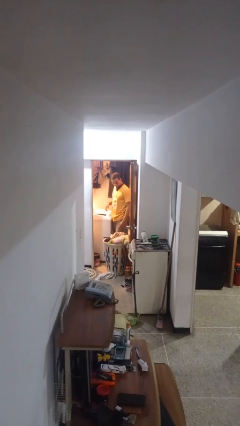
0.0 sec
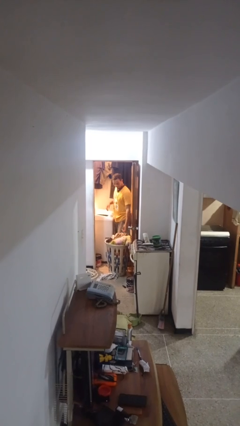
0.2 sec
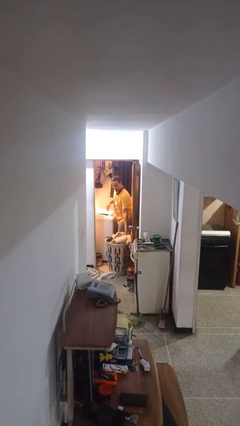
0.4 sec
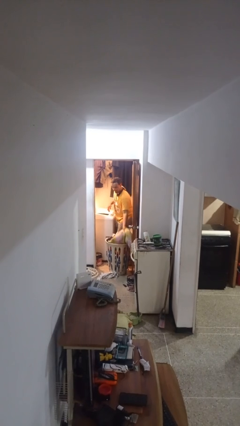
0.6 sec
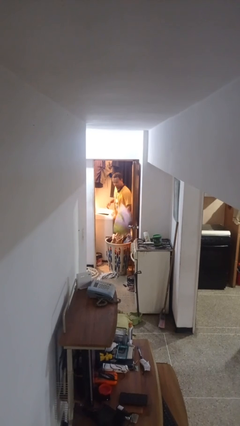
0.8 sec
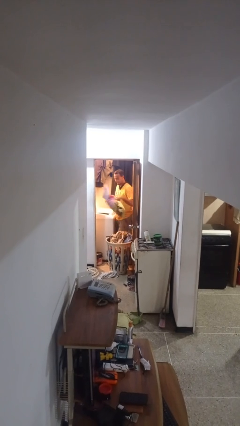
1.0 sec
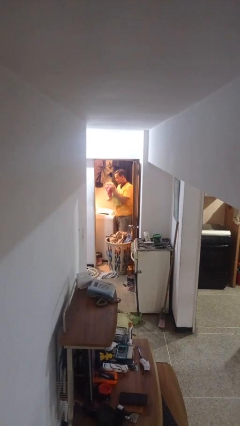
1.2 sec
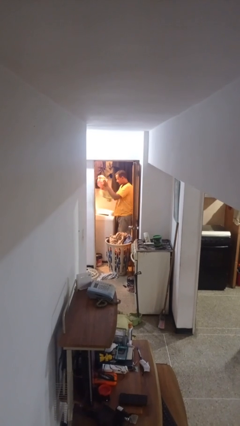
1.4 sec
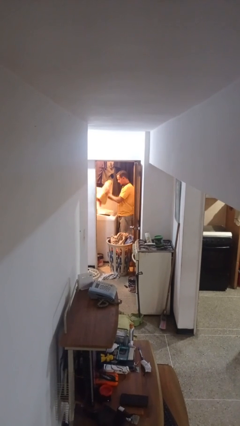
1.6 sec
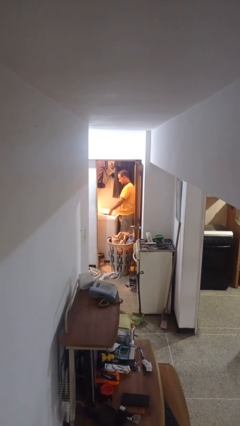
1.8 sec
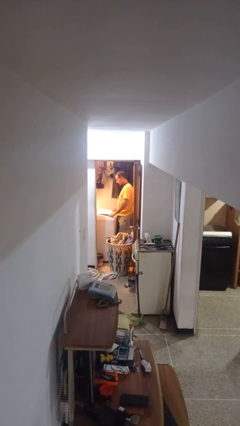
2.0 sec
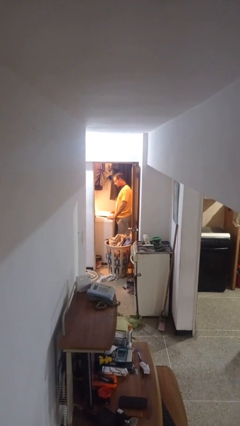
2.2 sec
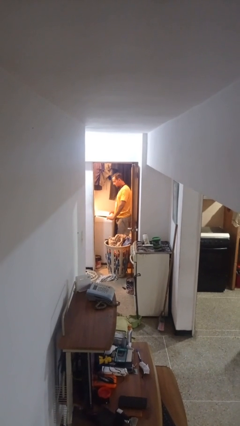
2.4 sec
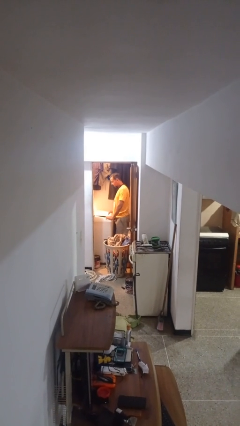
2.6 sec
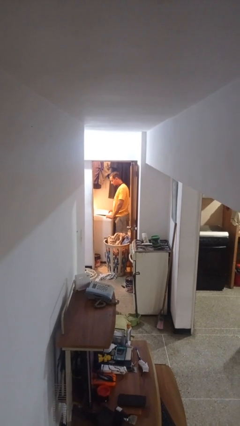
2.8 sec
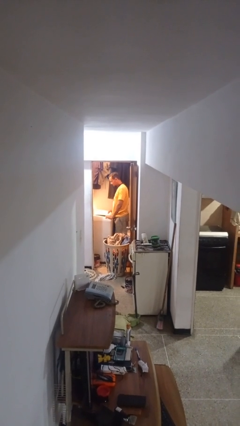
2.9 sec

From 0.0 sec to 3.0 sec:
person loads clotheswasher

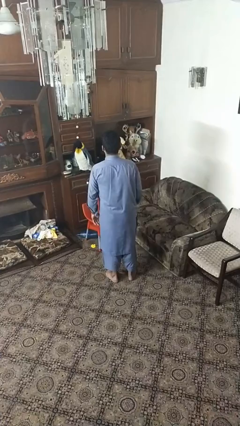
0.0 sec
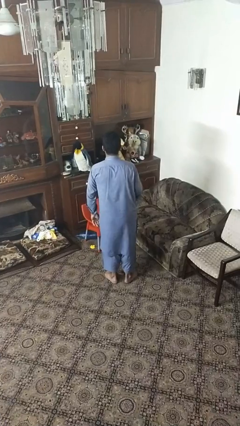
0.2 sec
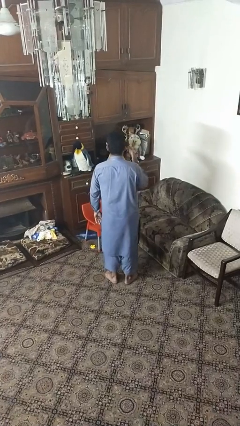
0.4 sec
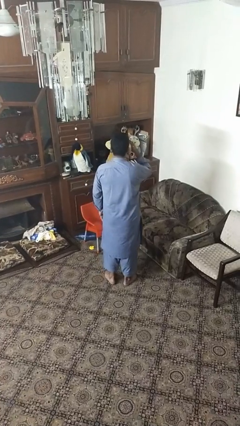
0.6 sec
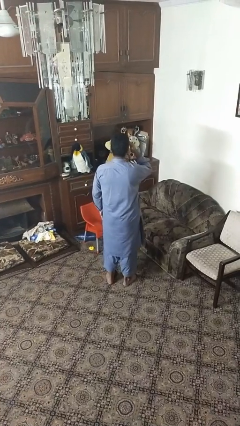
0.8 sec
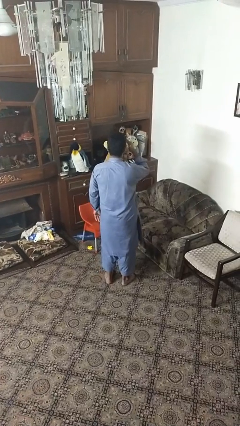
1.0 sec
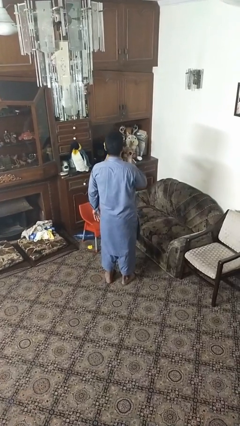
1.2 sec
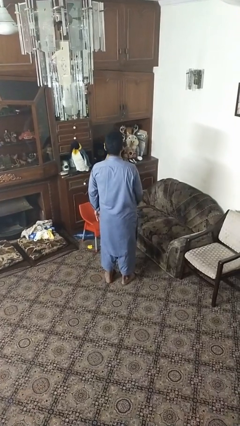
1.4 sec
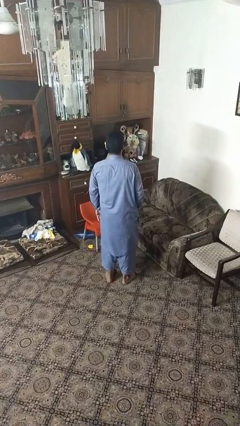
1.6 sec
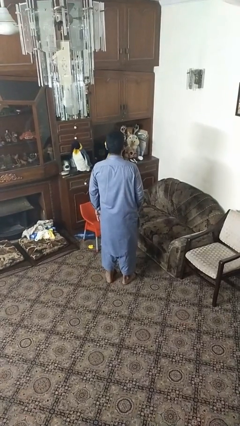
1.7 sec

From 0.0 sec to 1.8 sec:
person salutes

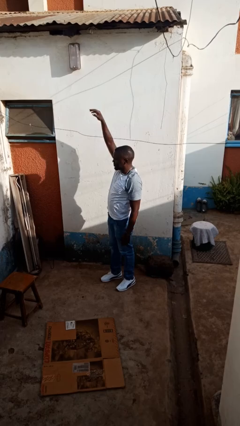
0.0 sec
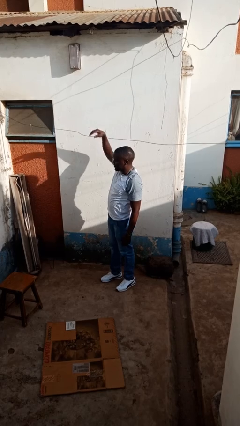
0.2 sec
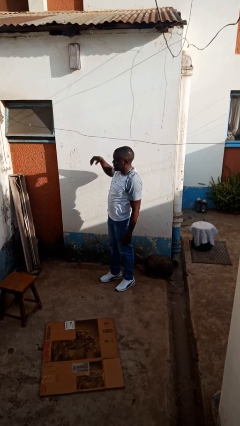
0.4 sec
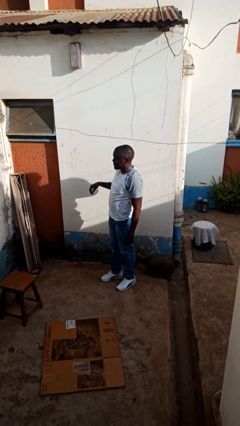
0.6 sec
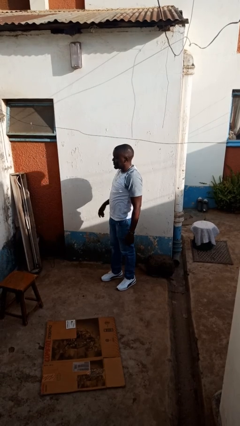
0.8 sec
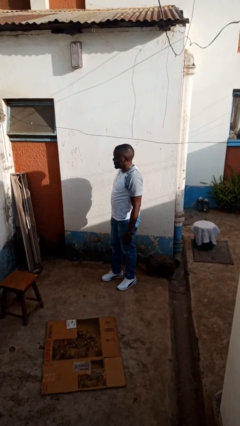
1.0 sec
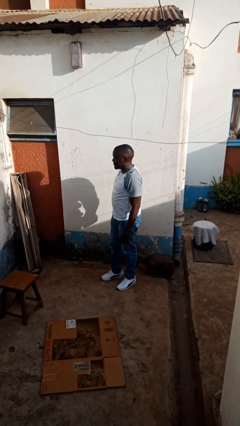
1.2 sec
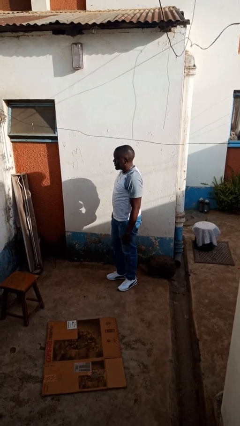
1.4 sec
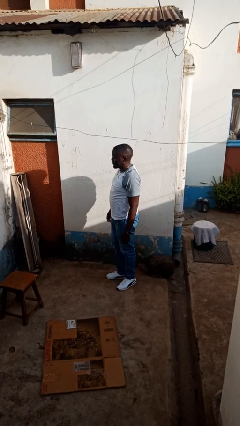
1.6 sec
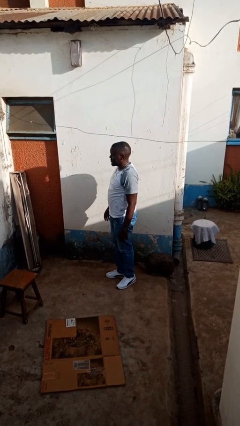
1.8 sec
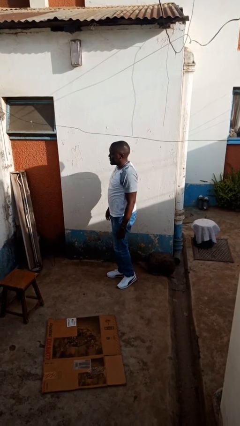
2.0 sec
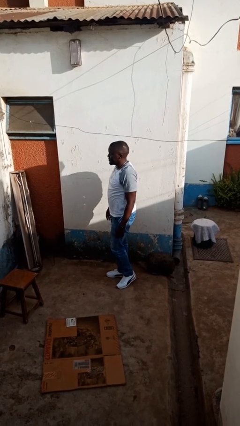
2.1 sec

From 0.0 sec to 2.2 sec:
person gestures lower hand

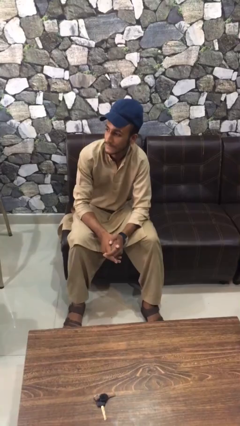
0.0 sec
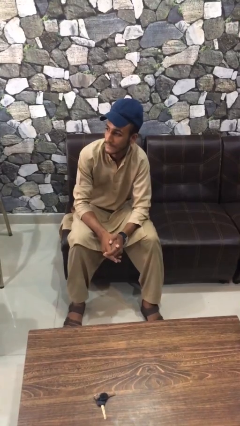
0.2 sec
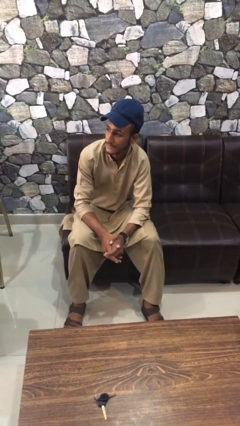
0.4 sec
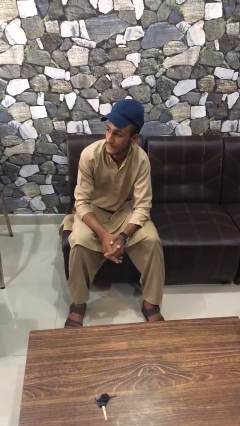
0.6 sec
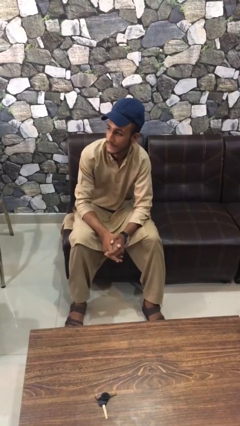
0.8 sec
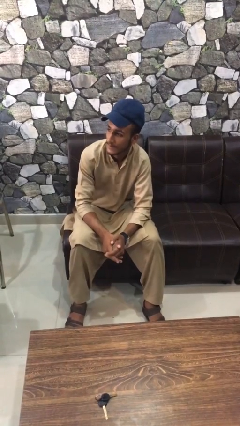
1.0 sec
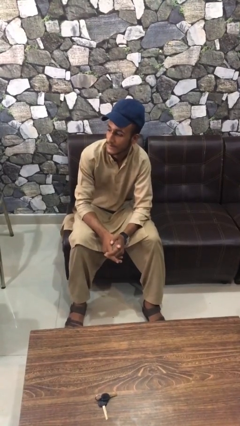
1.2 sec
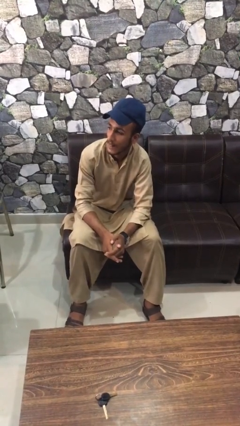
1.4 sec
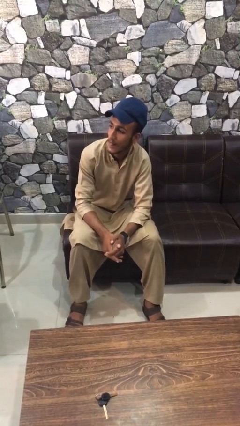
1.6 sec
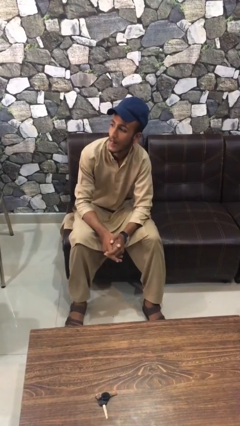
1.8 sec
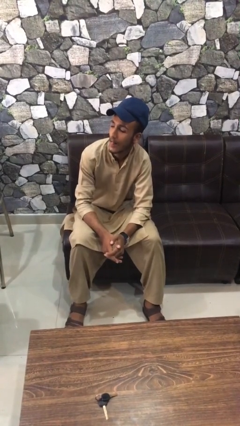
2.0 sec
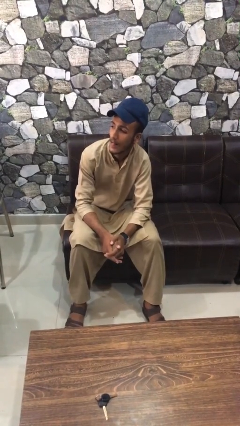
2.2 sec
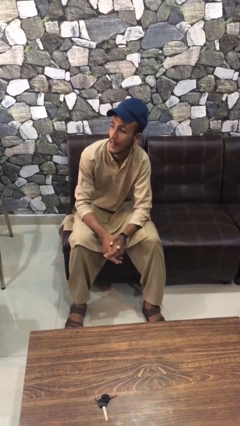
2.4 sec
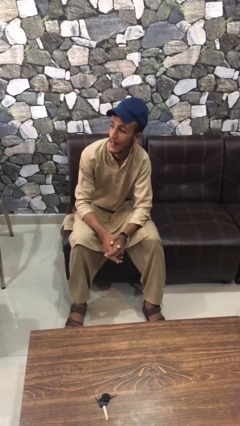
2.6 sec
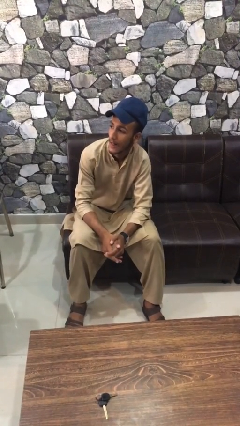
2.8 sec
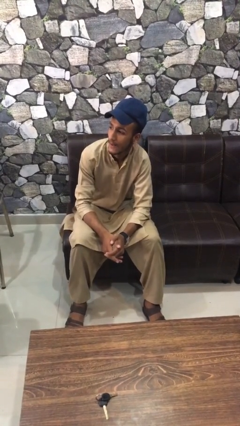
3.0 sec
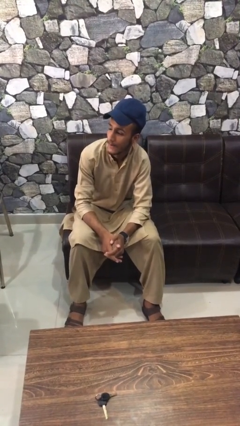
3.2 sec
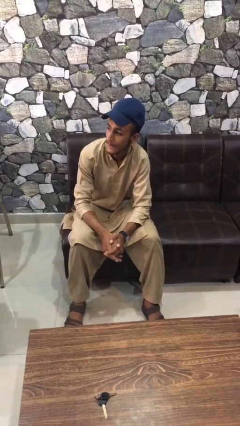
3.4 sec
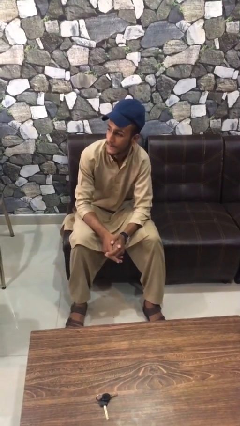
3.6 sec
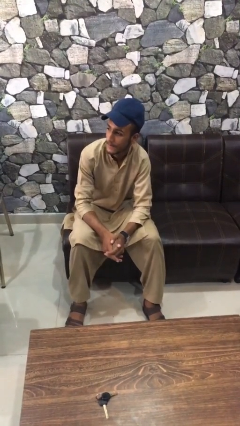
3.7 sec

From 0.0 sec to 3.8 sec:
person sticks out tongue

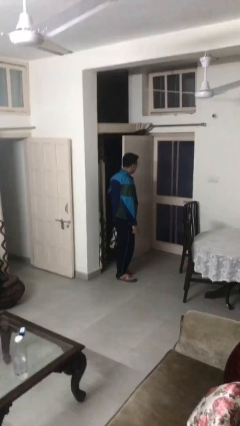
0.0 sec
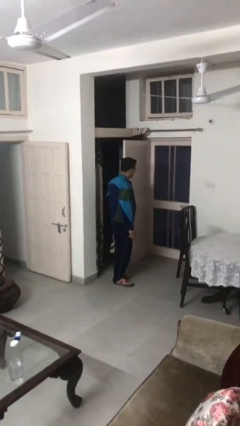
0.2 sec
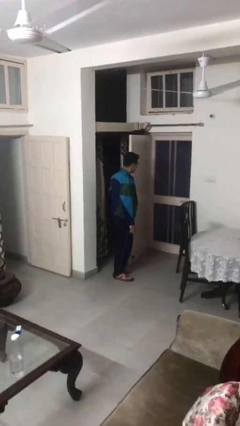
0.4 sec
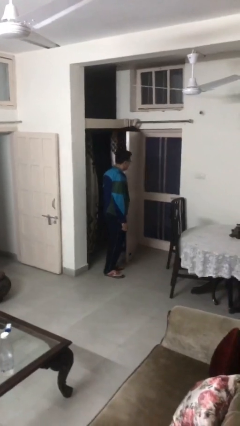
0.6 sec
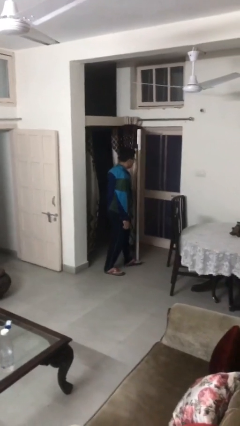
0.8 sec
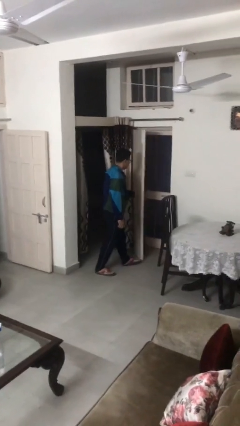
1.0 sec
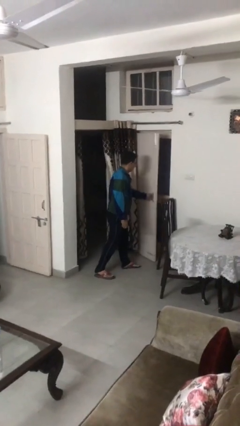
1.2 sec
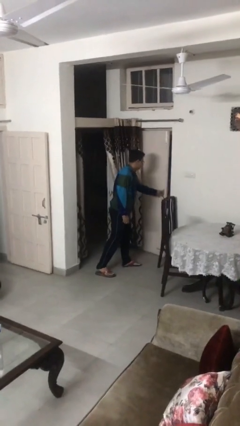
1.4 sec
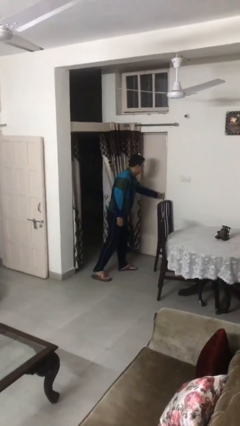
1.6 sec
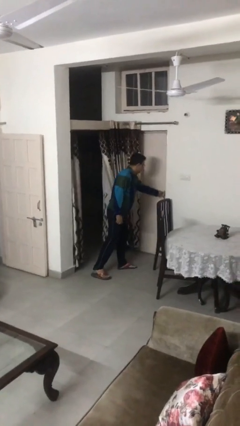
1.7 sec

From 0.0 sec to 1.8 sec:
person closes facility door

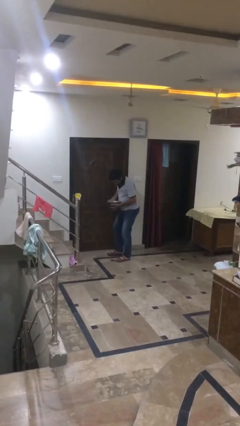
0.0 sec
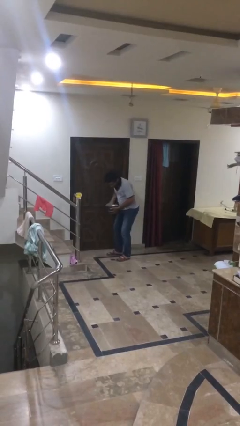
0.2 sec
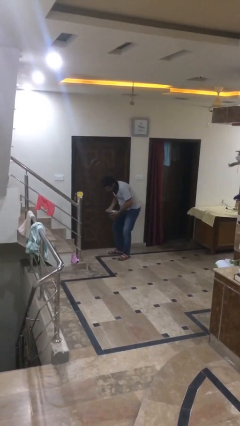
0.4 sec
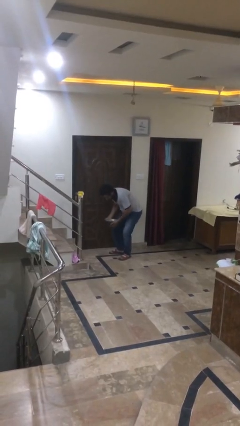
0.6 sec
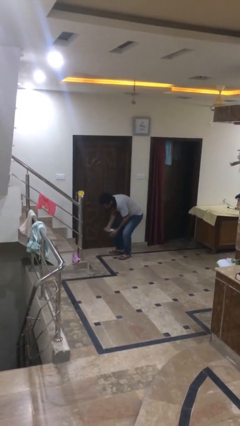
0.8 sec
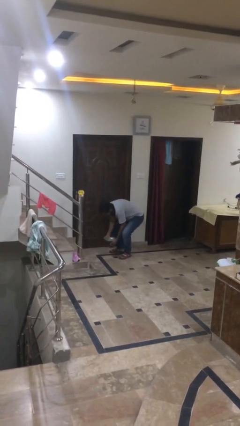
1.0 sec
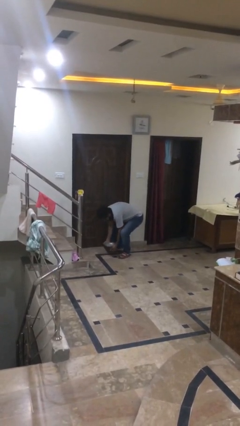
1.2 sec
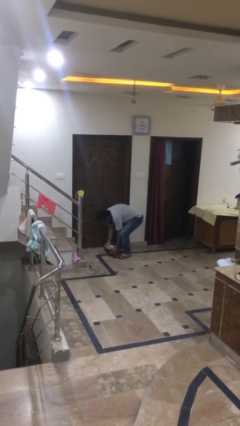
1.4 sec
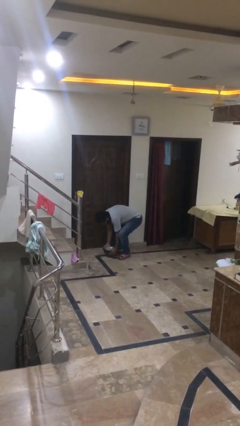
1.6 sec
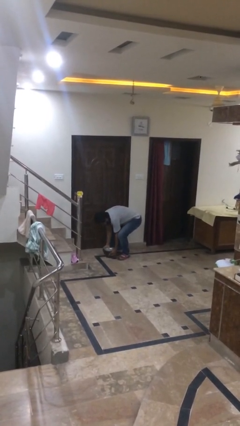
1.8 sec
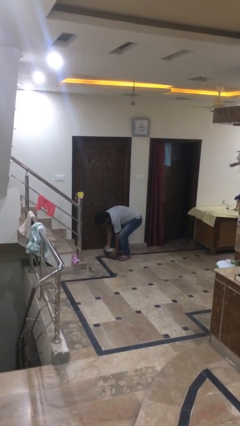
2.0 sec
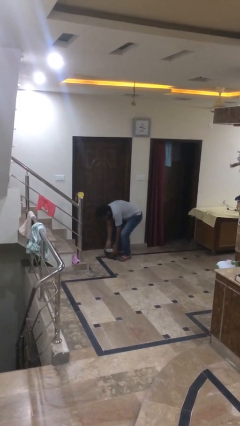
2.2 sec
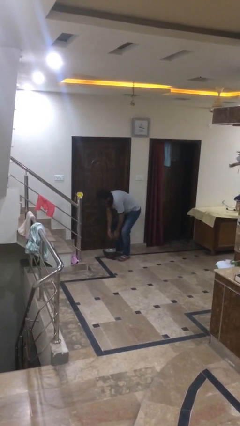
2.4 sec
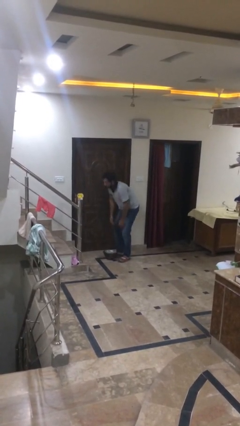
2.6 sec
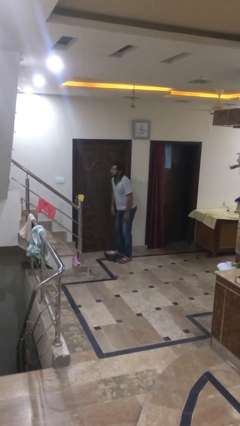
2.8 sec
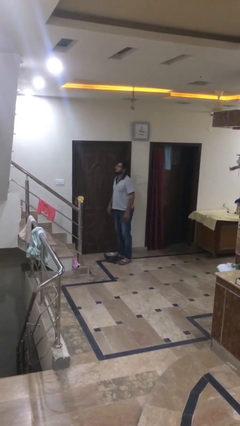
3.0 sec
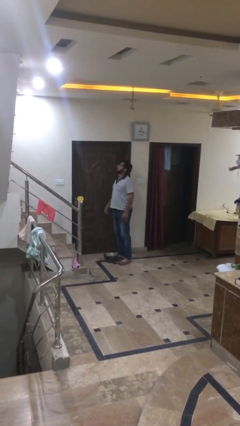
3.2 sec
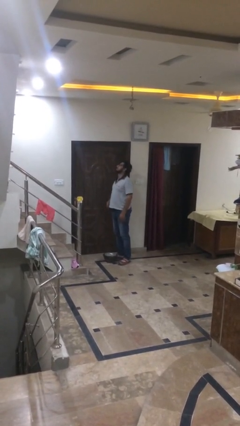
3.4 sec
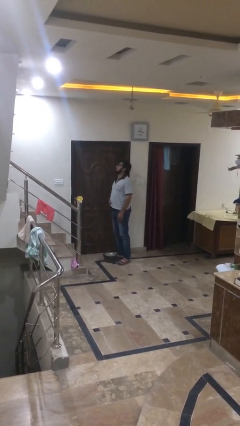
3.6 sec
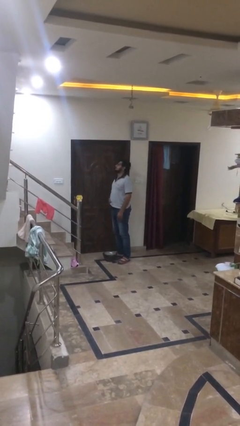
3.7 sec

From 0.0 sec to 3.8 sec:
person puts down object on floor

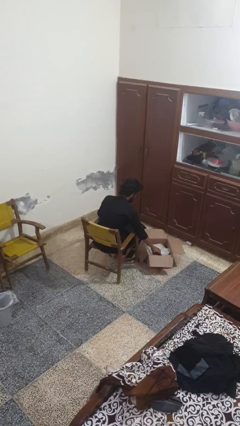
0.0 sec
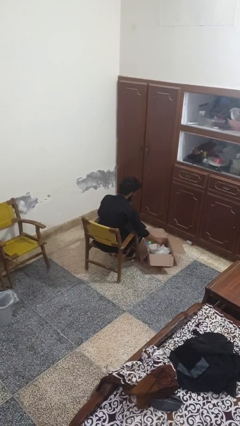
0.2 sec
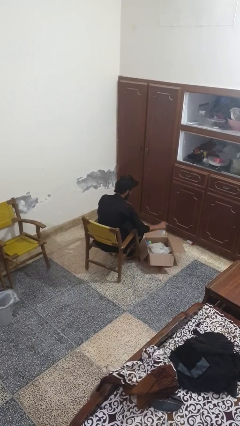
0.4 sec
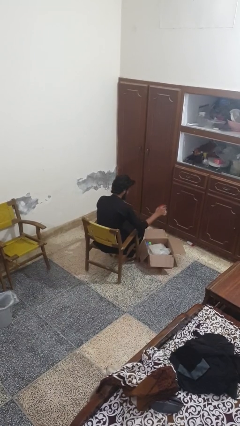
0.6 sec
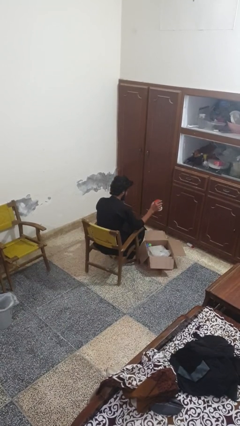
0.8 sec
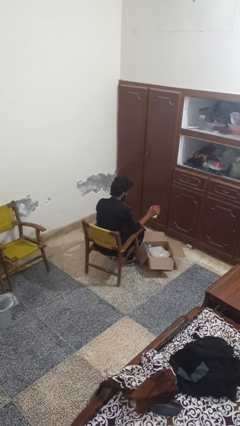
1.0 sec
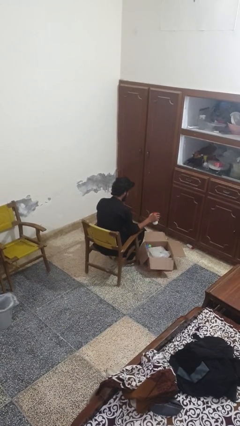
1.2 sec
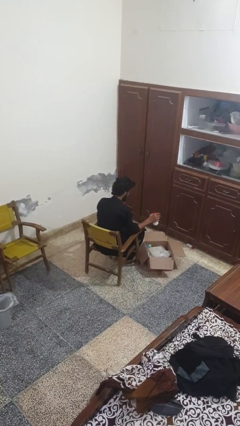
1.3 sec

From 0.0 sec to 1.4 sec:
person takes object from box
